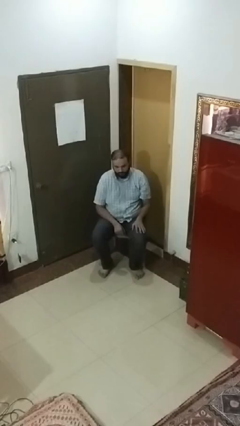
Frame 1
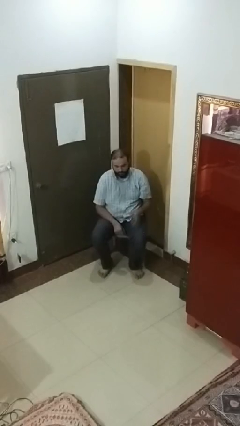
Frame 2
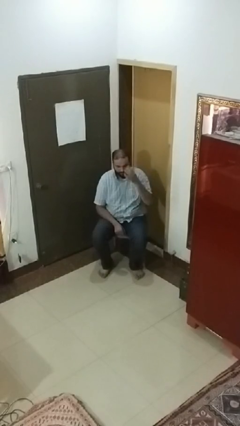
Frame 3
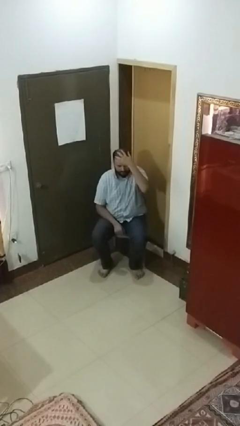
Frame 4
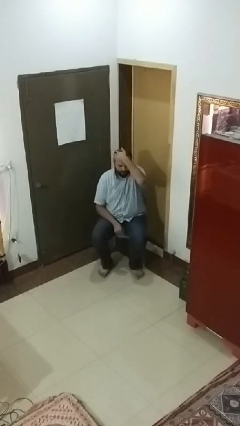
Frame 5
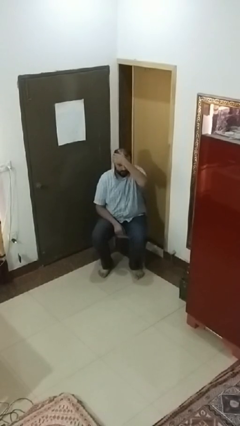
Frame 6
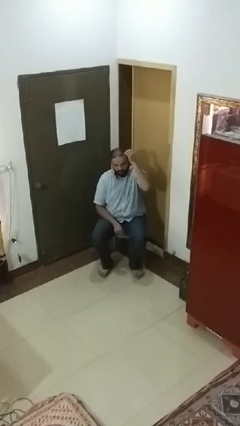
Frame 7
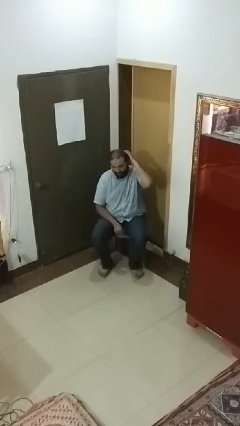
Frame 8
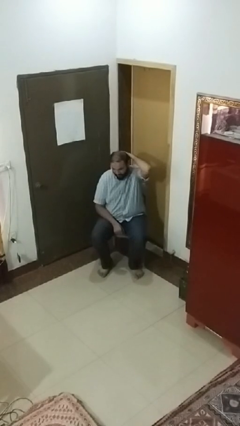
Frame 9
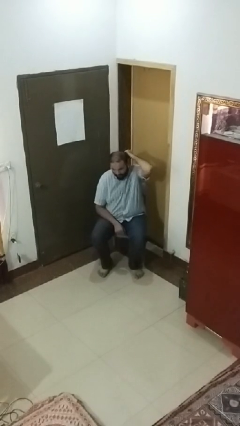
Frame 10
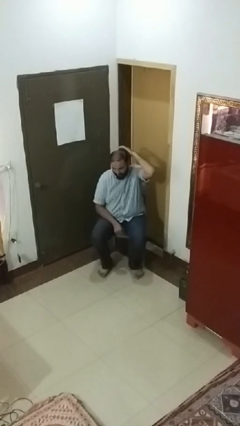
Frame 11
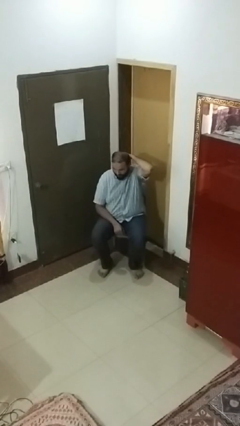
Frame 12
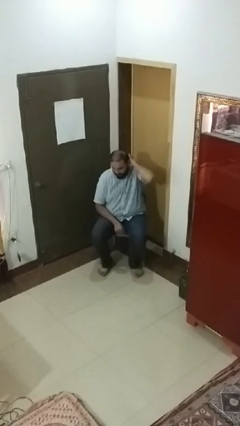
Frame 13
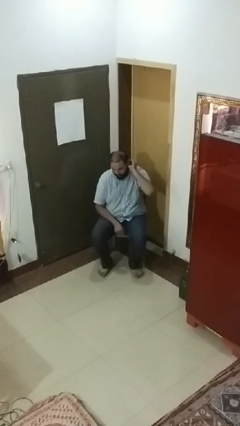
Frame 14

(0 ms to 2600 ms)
person strokes hair

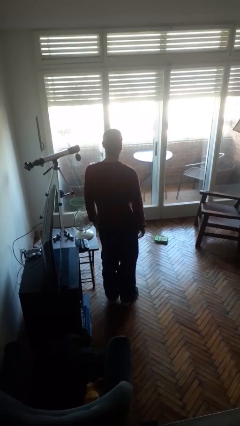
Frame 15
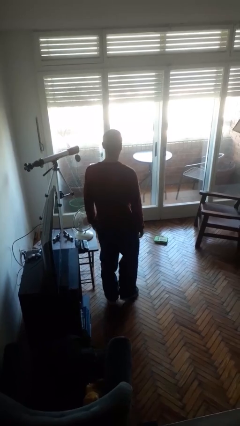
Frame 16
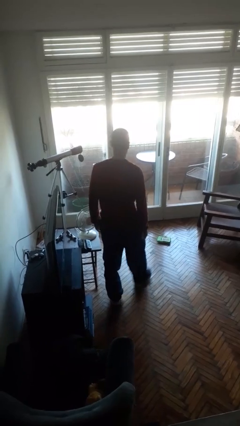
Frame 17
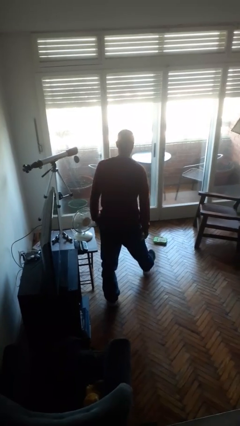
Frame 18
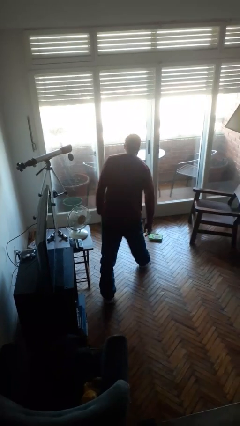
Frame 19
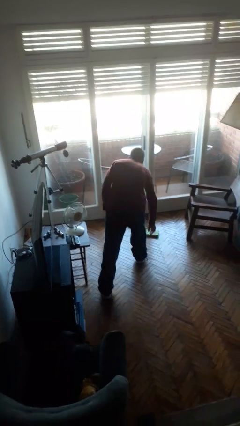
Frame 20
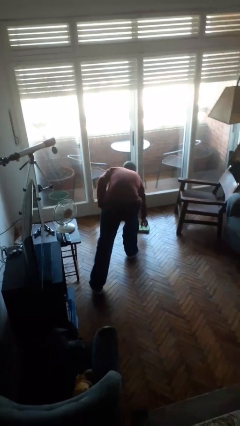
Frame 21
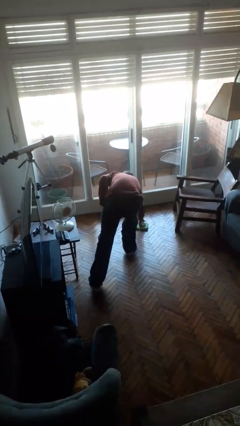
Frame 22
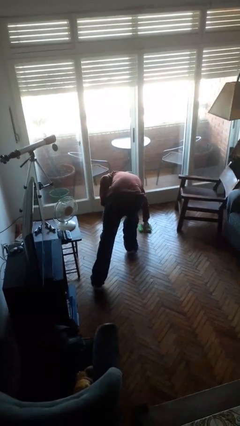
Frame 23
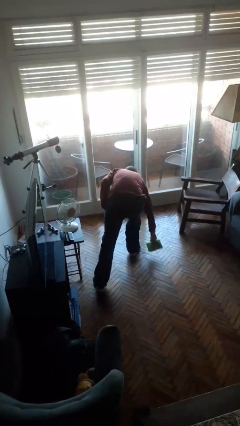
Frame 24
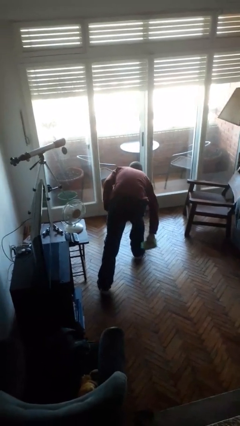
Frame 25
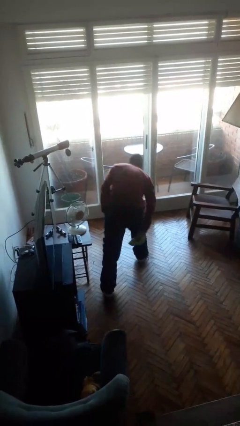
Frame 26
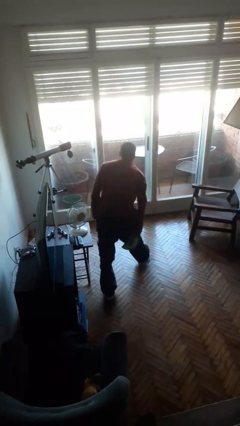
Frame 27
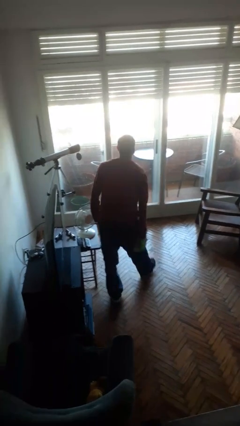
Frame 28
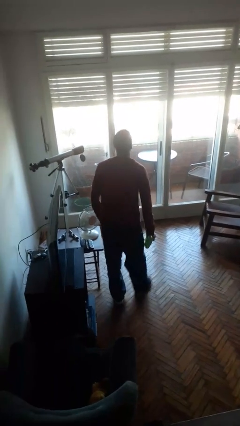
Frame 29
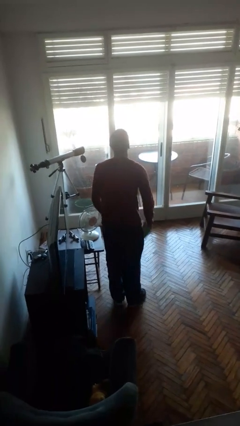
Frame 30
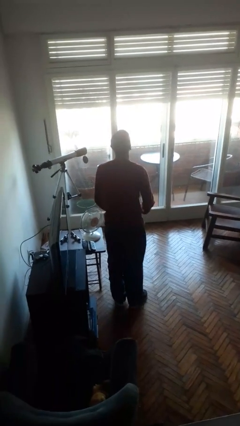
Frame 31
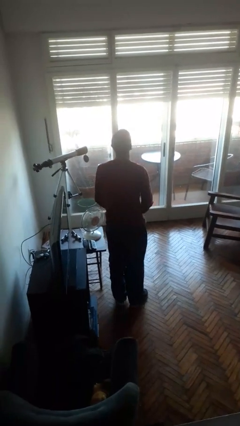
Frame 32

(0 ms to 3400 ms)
person picks up object from floor

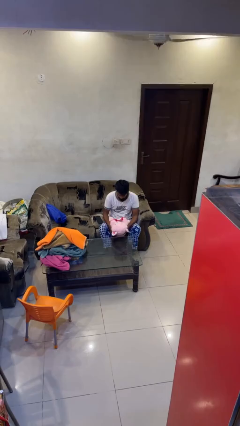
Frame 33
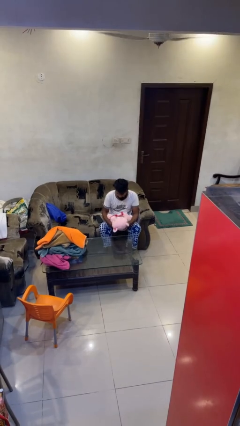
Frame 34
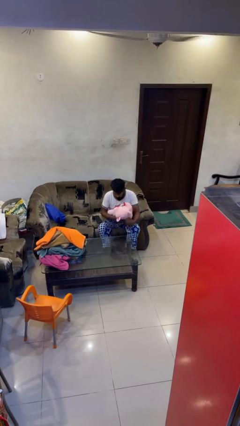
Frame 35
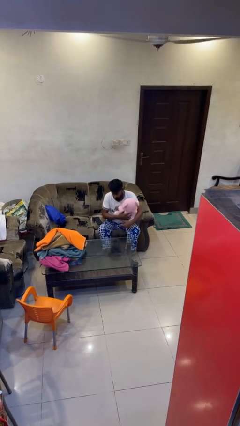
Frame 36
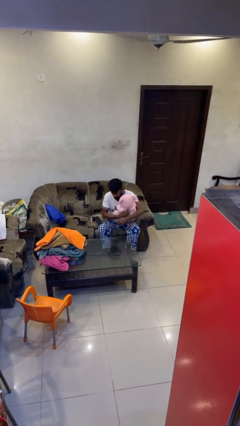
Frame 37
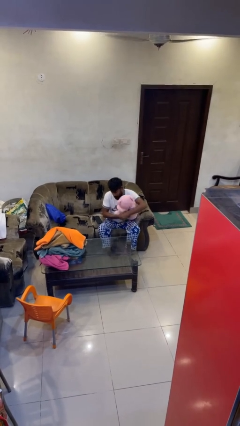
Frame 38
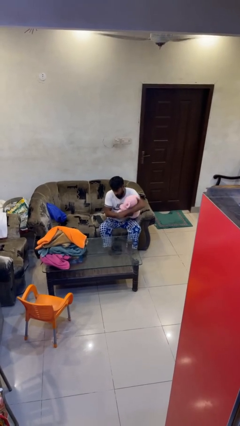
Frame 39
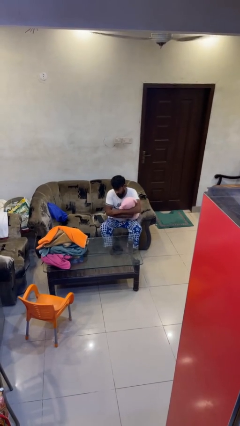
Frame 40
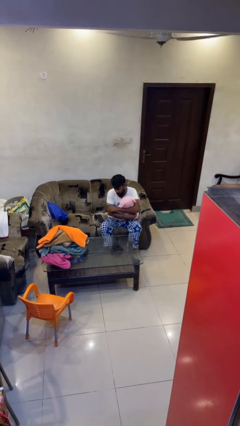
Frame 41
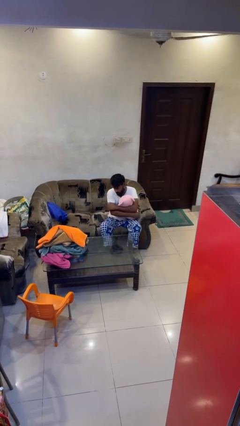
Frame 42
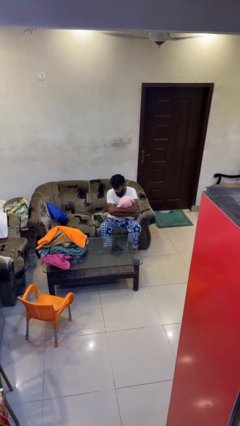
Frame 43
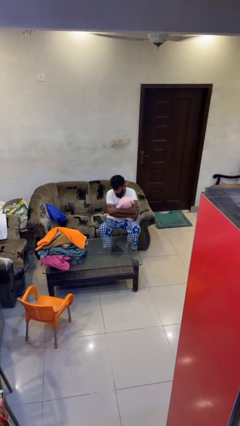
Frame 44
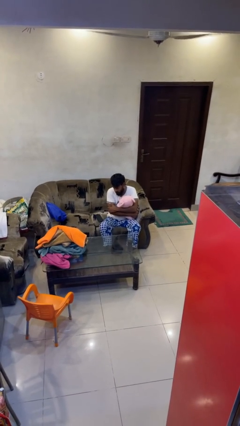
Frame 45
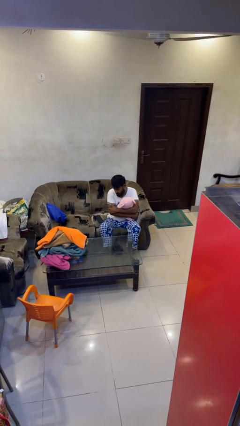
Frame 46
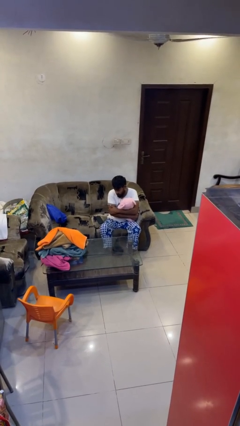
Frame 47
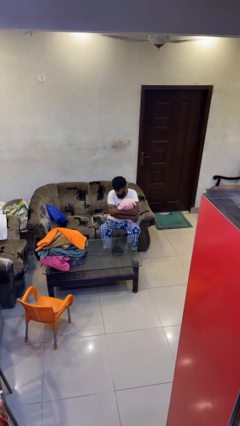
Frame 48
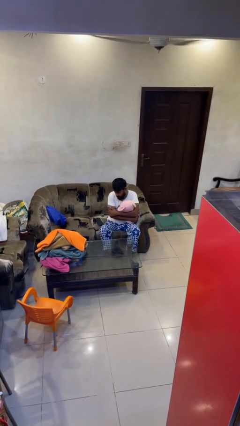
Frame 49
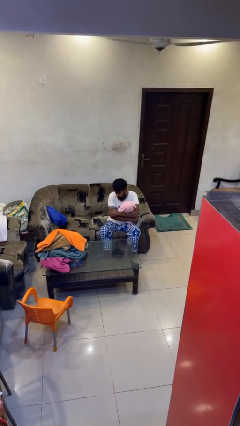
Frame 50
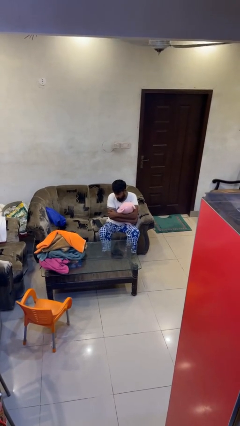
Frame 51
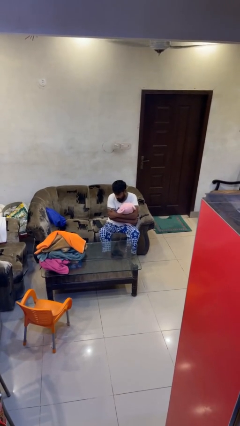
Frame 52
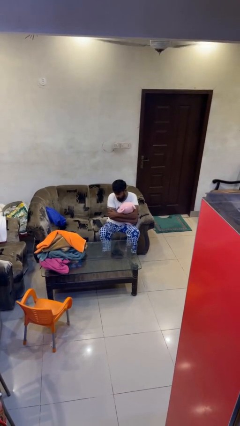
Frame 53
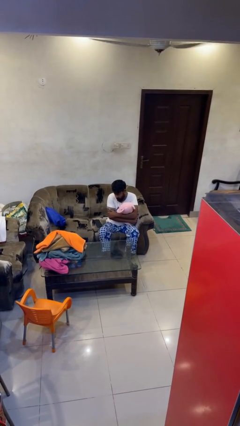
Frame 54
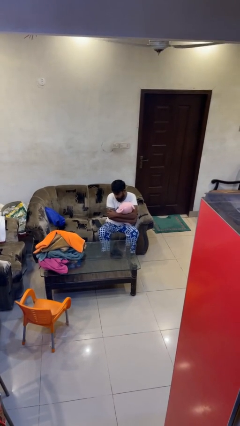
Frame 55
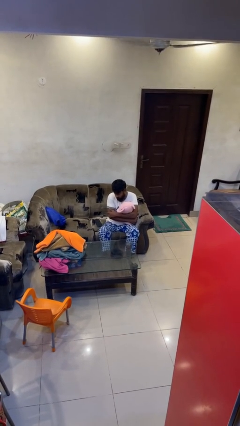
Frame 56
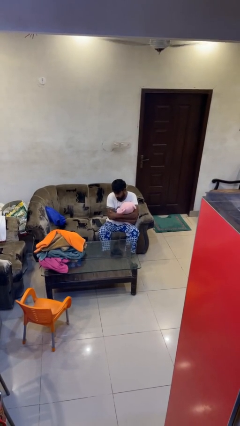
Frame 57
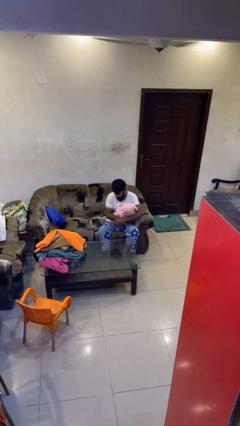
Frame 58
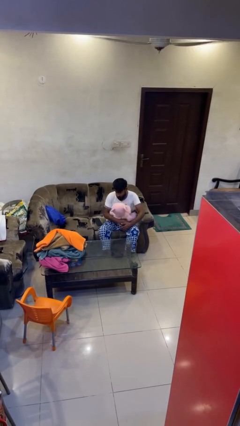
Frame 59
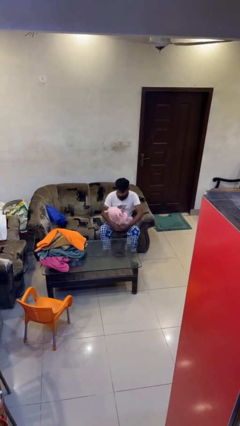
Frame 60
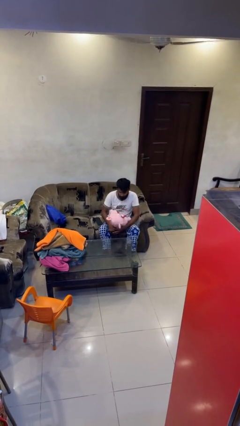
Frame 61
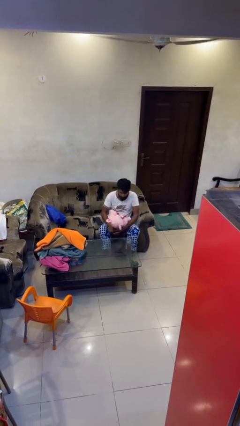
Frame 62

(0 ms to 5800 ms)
person hugs stuffed animal

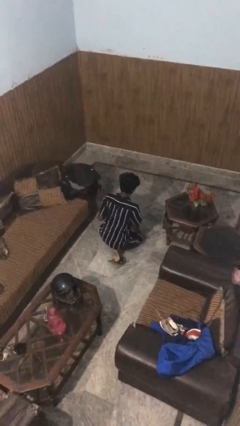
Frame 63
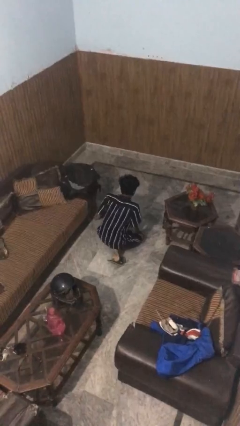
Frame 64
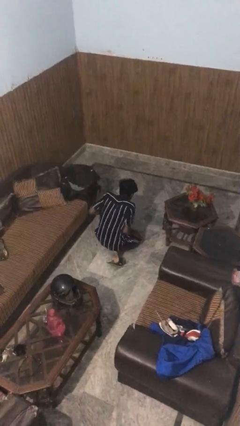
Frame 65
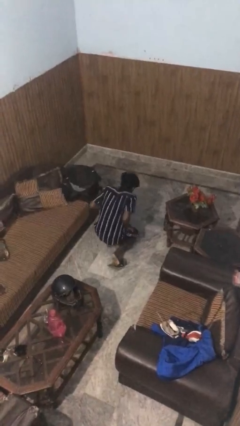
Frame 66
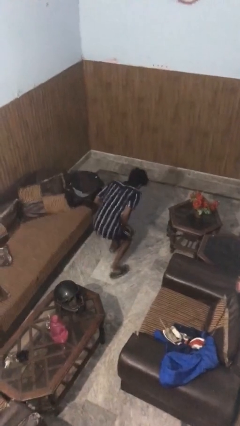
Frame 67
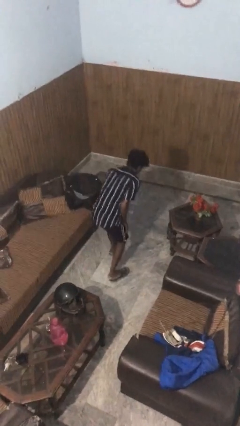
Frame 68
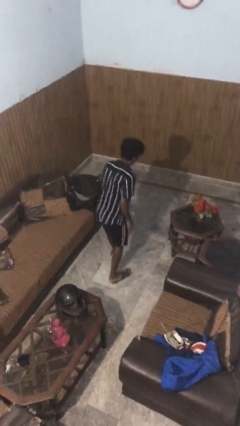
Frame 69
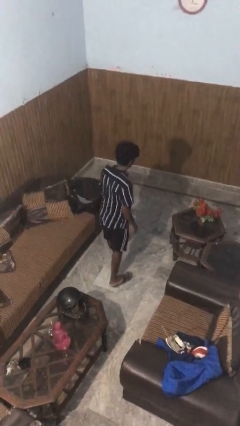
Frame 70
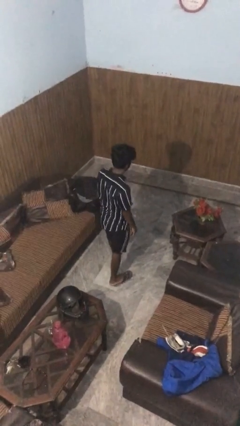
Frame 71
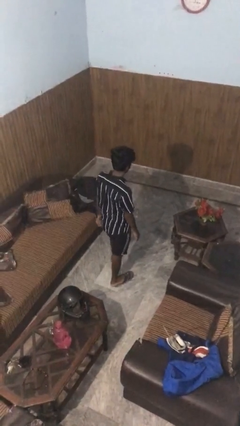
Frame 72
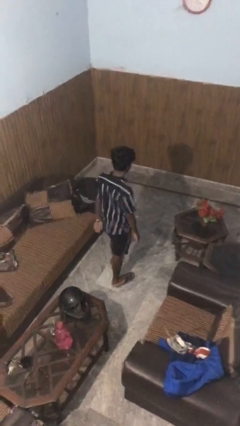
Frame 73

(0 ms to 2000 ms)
person stands up from floor

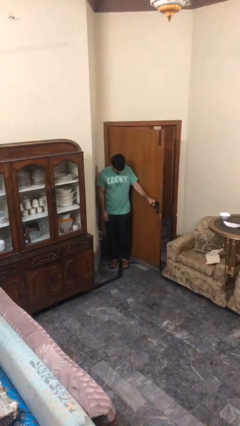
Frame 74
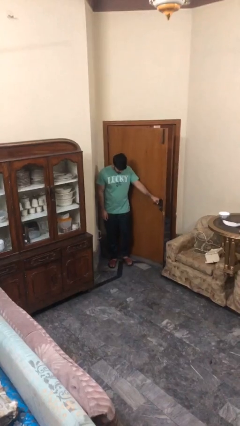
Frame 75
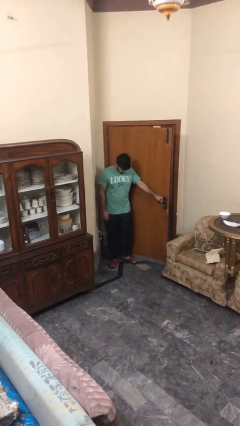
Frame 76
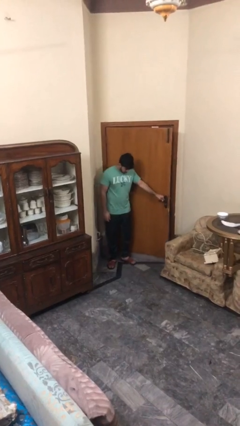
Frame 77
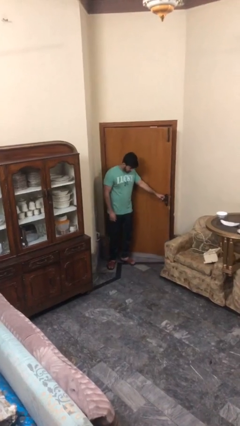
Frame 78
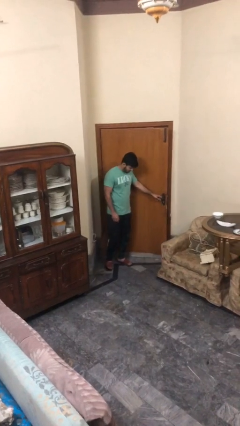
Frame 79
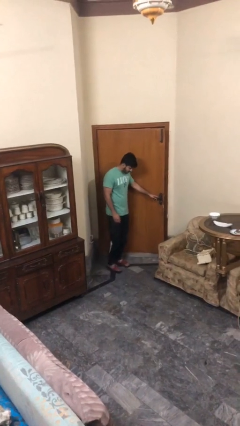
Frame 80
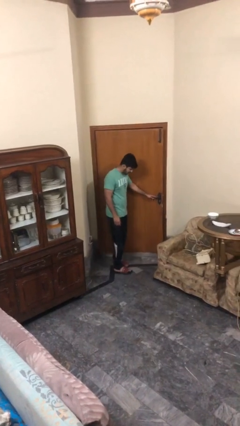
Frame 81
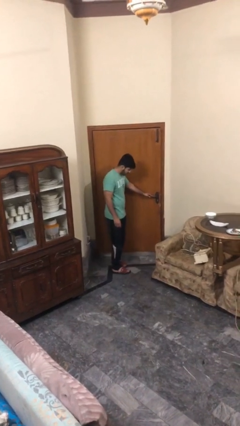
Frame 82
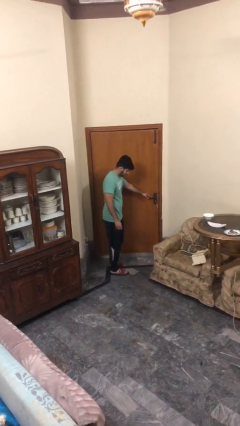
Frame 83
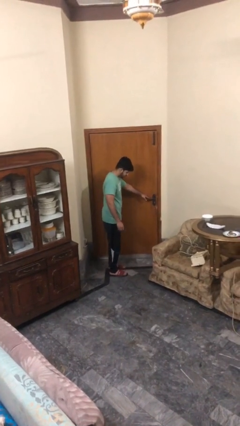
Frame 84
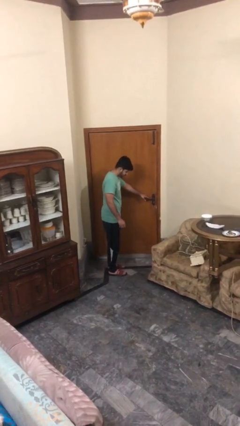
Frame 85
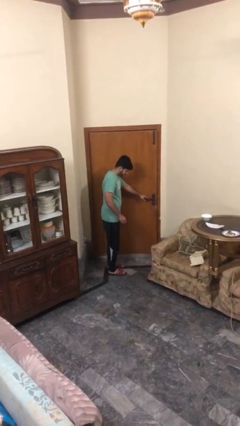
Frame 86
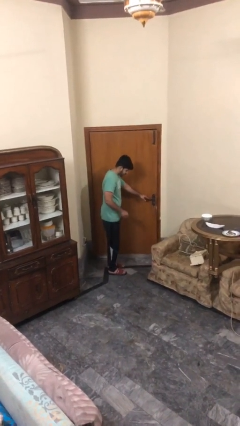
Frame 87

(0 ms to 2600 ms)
person closes facility door

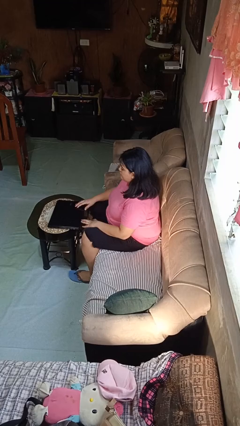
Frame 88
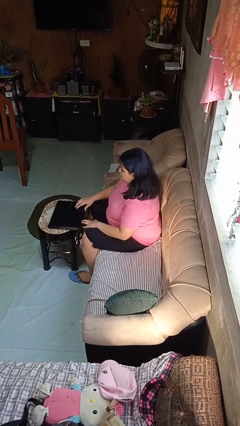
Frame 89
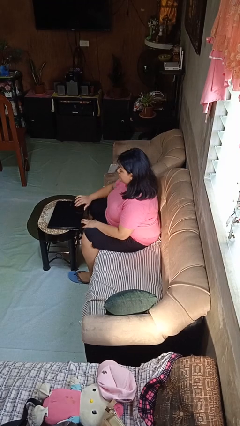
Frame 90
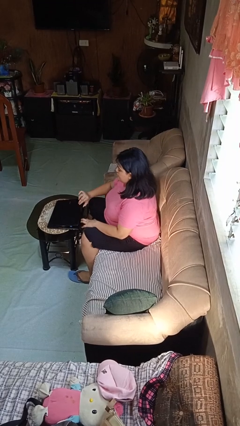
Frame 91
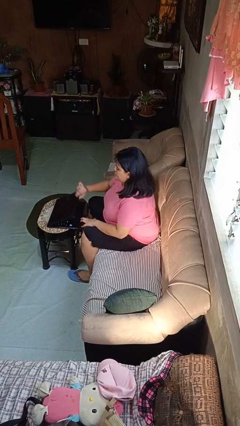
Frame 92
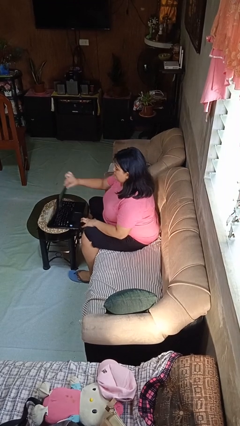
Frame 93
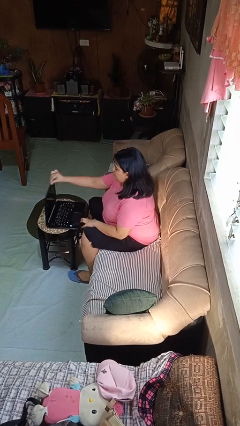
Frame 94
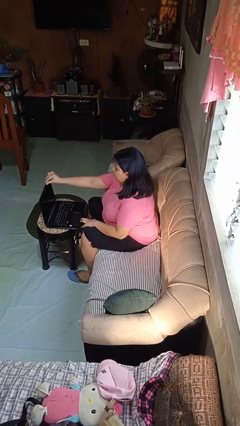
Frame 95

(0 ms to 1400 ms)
person opens laptop
